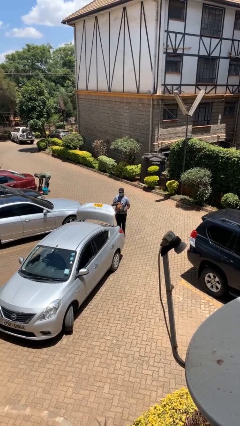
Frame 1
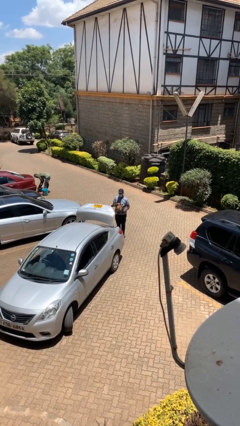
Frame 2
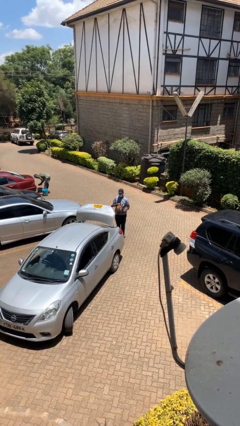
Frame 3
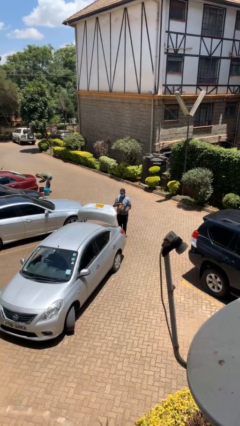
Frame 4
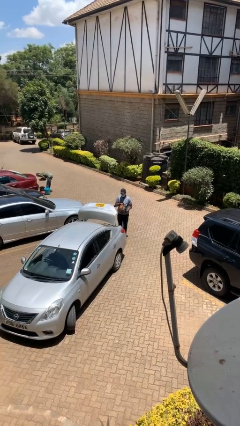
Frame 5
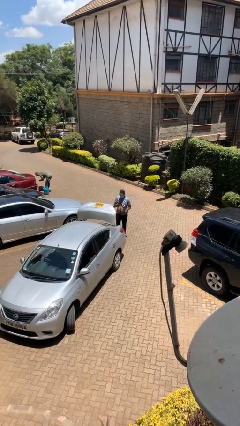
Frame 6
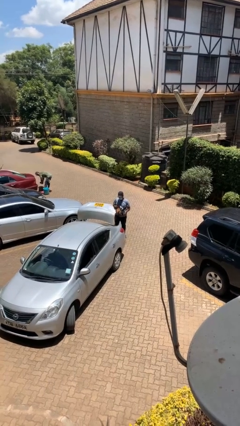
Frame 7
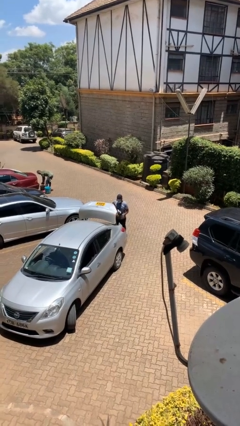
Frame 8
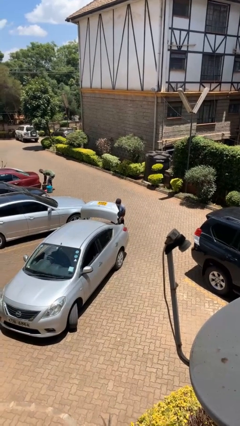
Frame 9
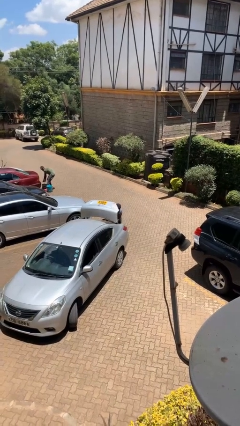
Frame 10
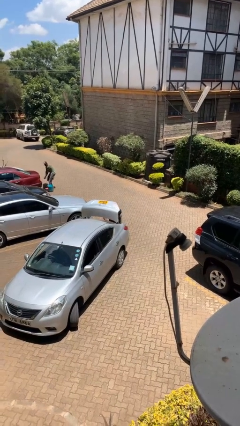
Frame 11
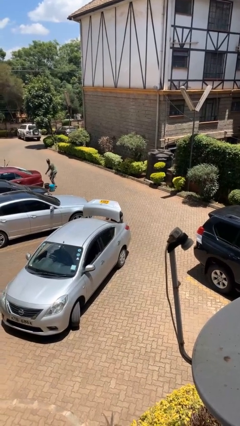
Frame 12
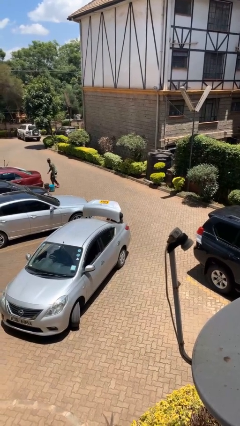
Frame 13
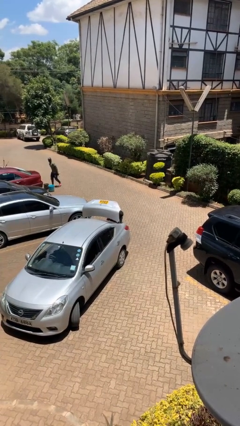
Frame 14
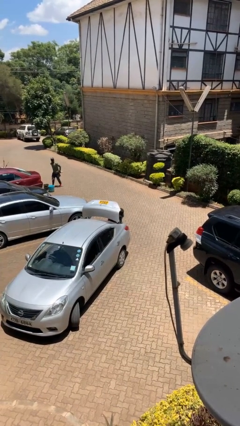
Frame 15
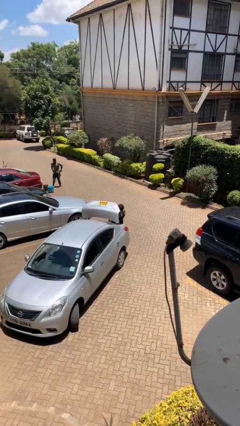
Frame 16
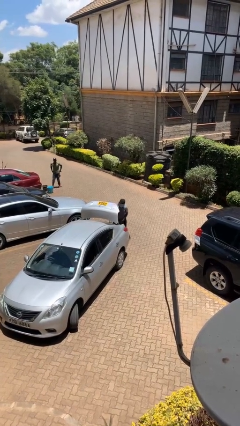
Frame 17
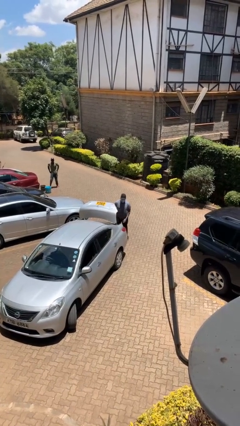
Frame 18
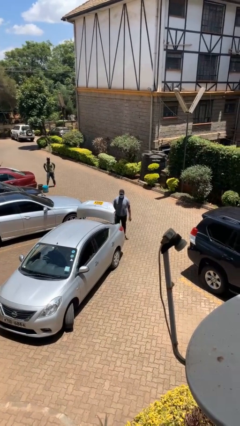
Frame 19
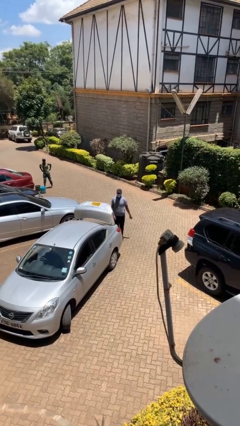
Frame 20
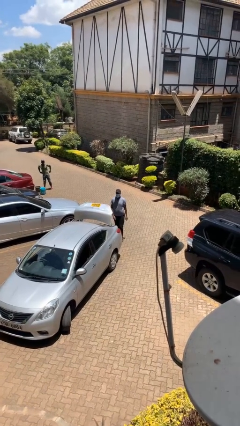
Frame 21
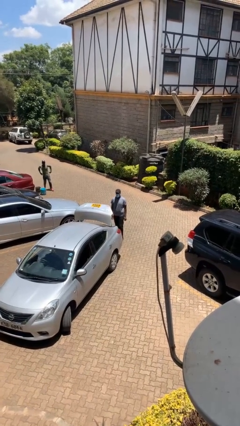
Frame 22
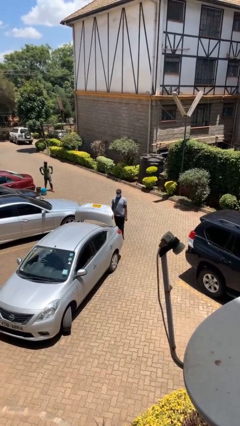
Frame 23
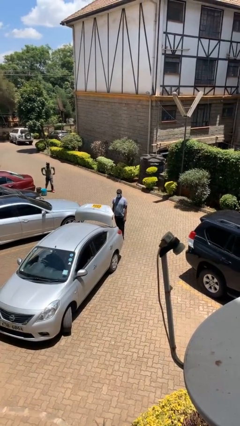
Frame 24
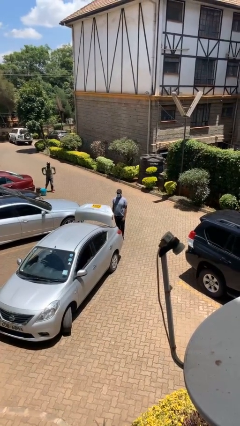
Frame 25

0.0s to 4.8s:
person loads car

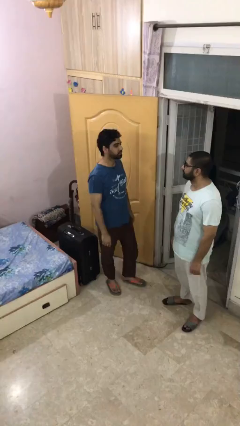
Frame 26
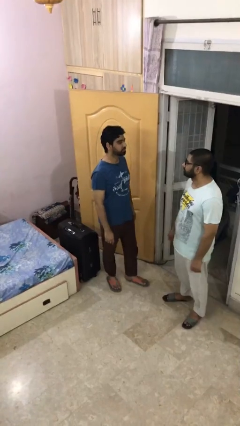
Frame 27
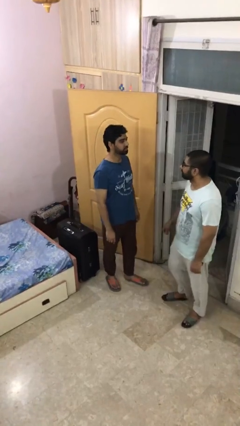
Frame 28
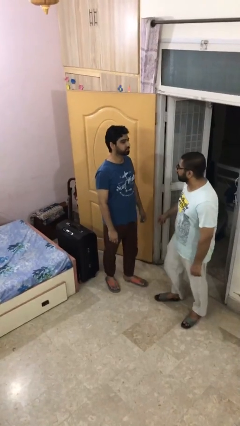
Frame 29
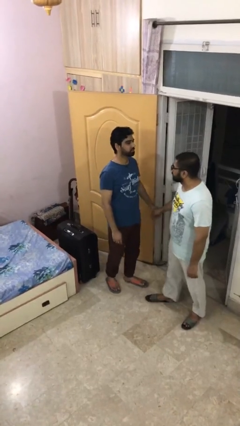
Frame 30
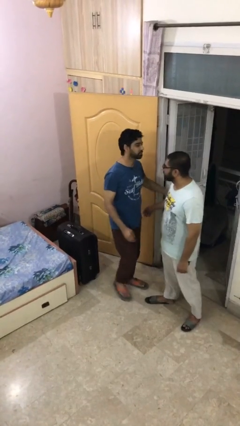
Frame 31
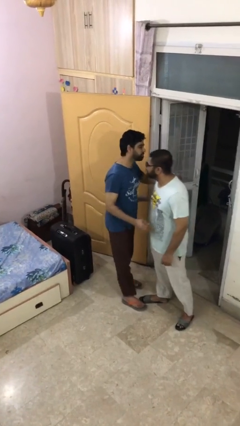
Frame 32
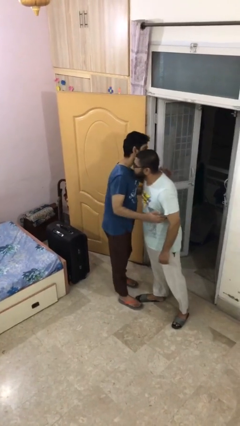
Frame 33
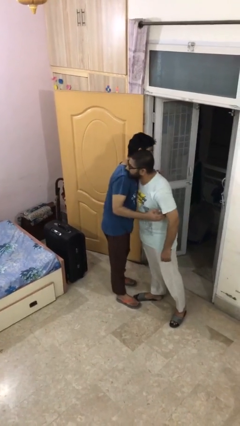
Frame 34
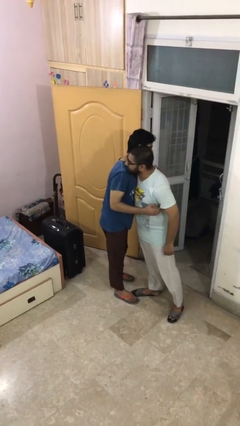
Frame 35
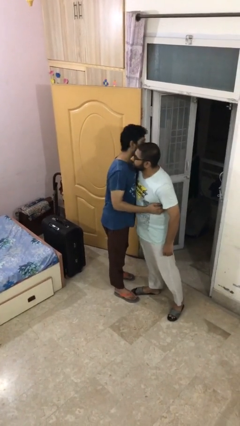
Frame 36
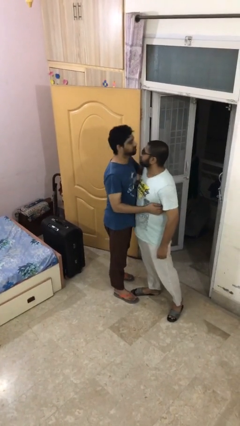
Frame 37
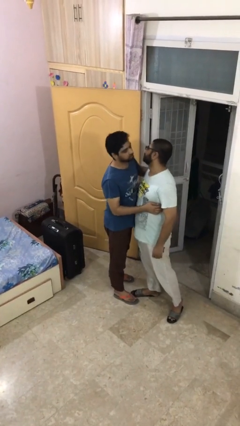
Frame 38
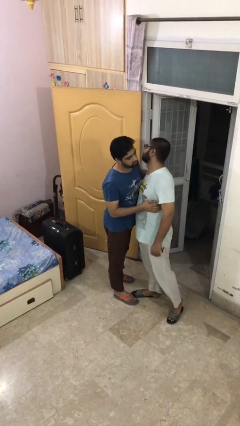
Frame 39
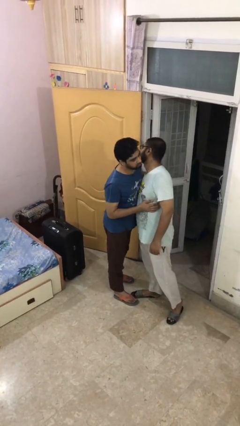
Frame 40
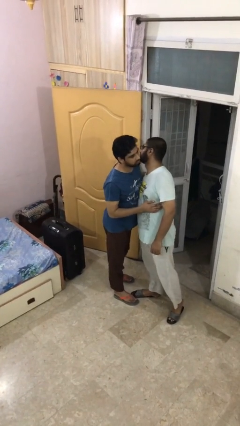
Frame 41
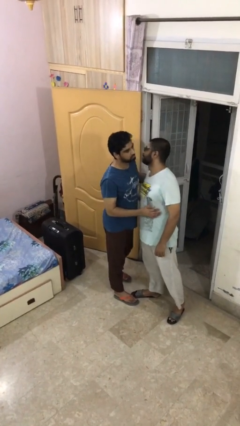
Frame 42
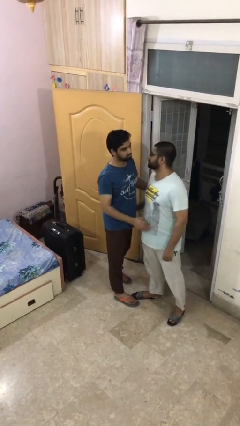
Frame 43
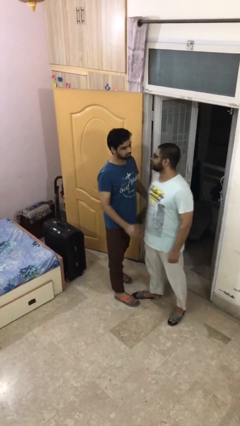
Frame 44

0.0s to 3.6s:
person embraces person

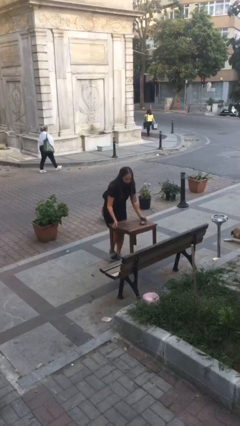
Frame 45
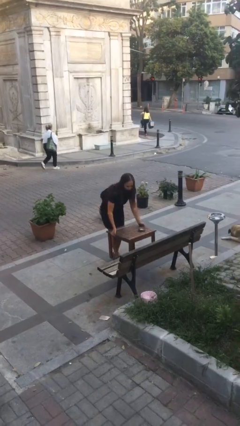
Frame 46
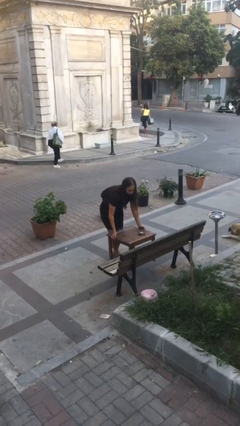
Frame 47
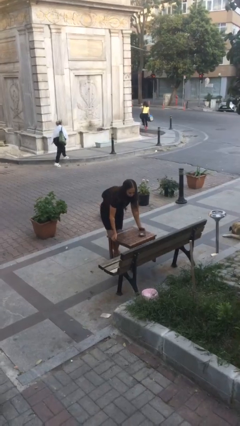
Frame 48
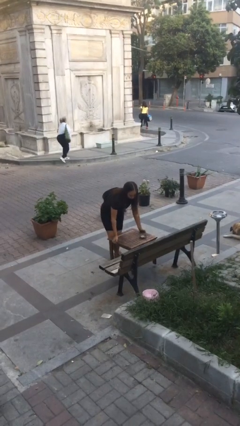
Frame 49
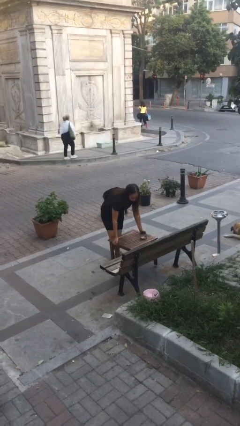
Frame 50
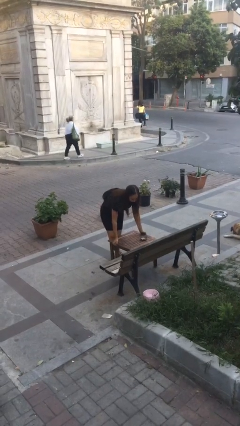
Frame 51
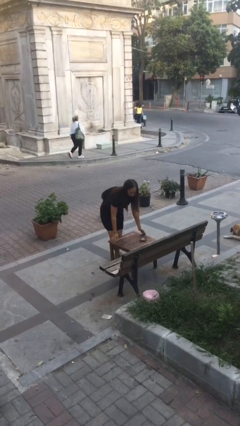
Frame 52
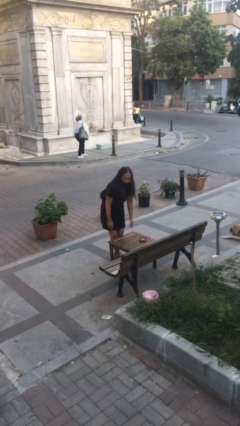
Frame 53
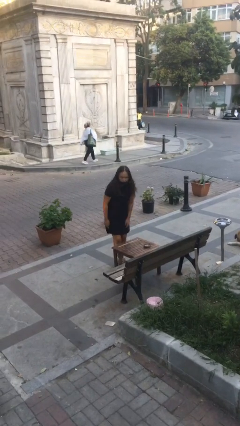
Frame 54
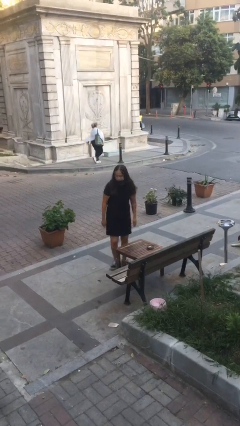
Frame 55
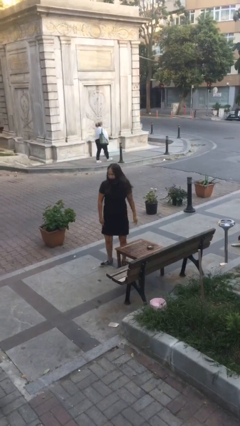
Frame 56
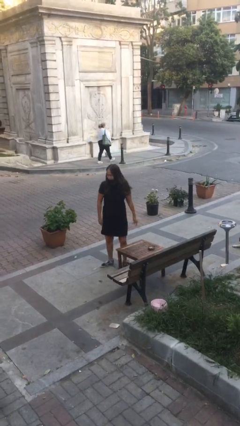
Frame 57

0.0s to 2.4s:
person puts down object on floor

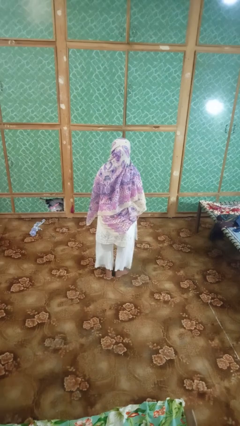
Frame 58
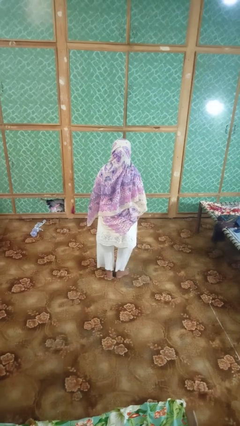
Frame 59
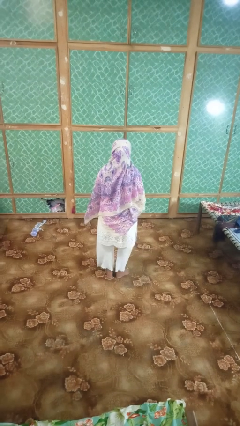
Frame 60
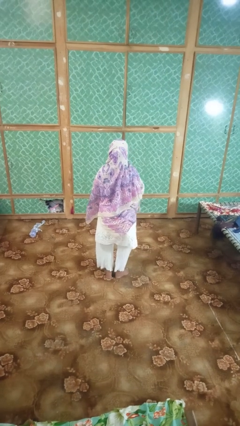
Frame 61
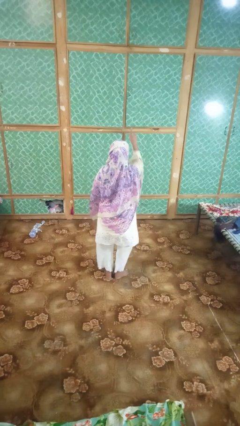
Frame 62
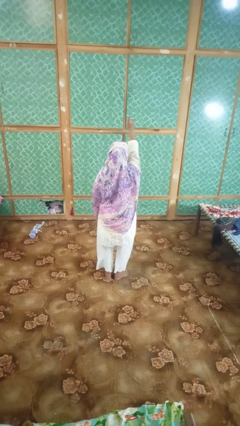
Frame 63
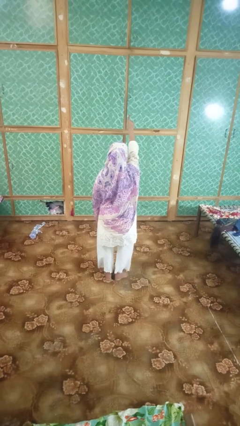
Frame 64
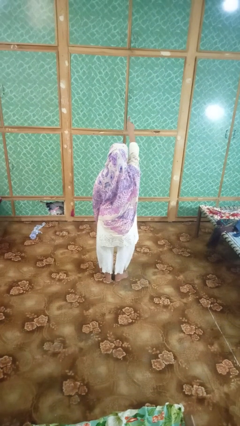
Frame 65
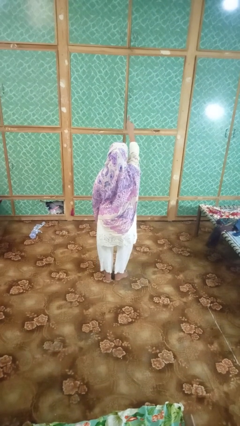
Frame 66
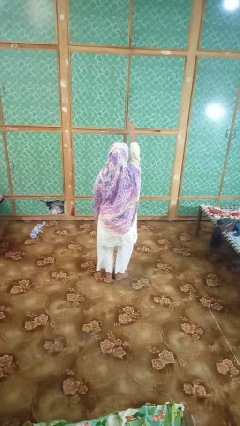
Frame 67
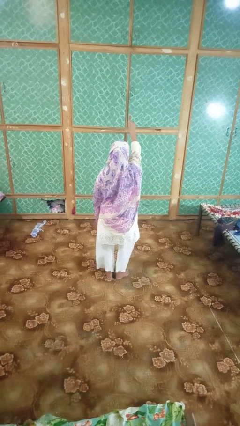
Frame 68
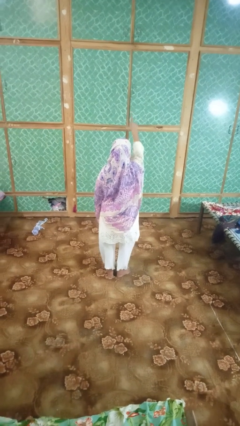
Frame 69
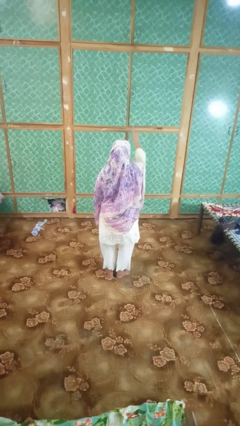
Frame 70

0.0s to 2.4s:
person gestures number one

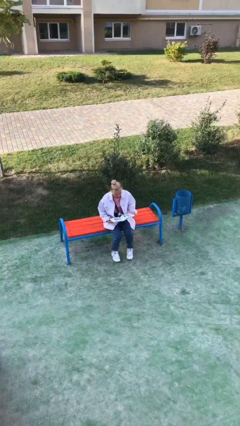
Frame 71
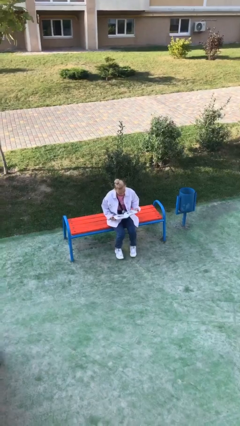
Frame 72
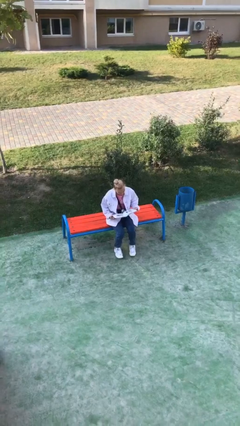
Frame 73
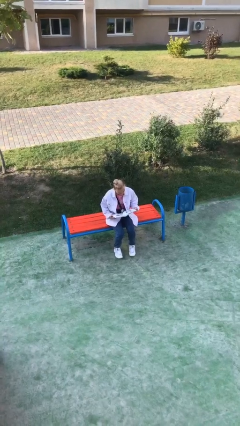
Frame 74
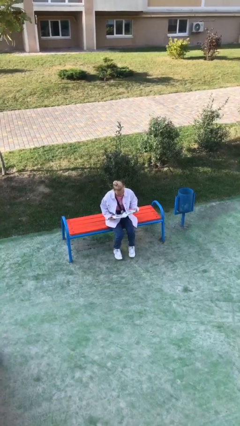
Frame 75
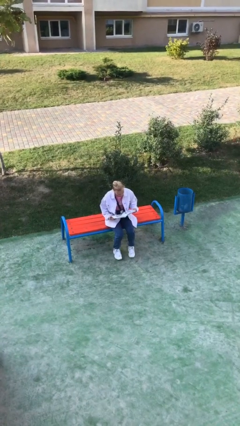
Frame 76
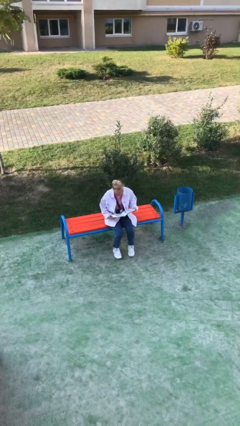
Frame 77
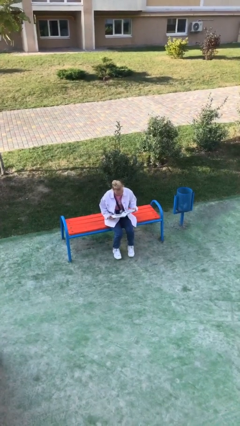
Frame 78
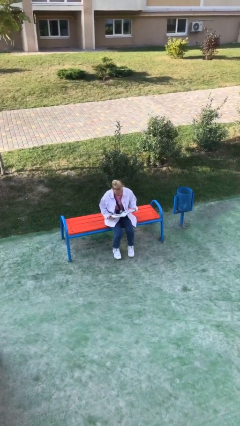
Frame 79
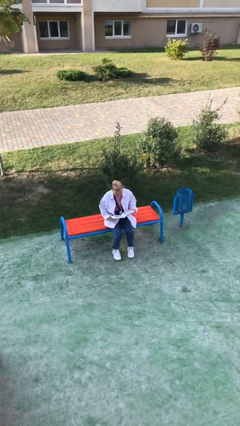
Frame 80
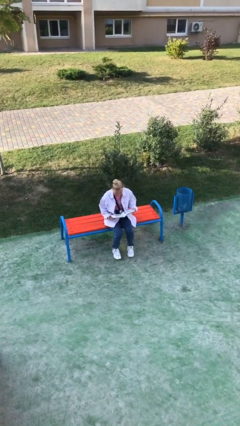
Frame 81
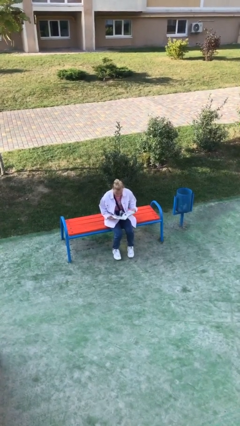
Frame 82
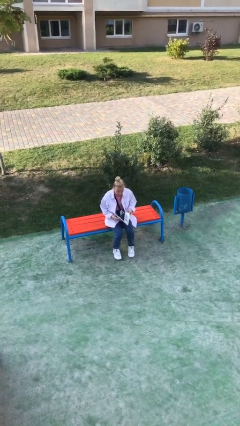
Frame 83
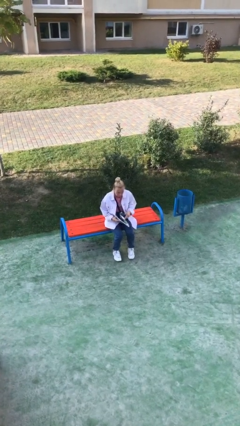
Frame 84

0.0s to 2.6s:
person reads document

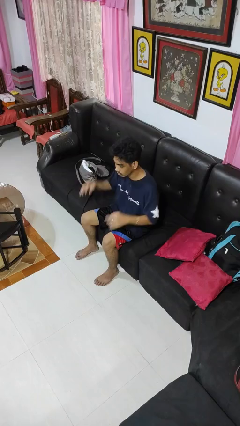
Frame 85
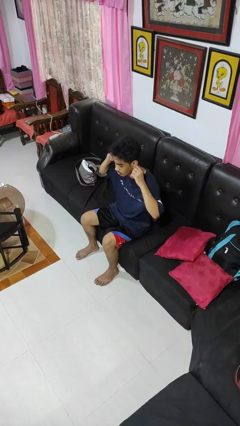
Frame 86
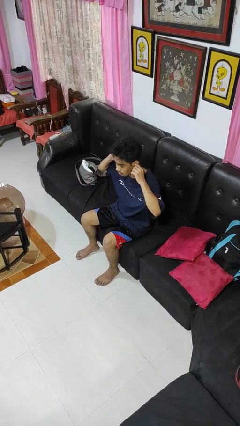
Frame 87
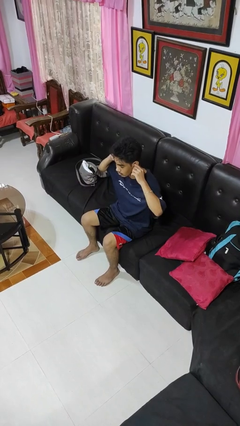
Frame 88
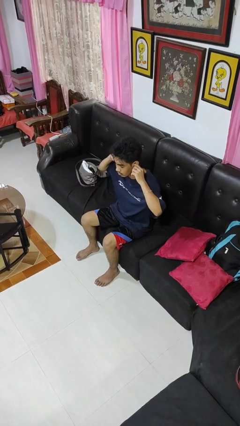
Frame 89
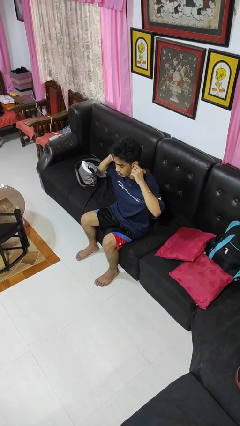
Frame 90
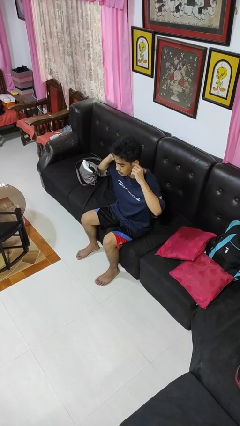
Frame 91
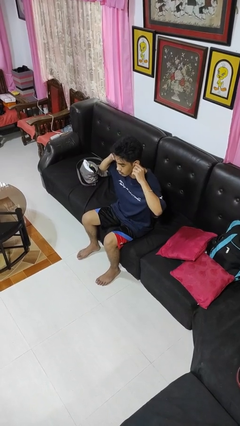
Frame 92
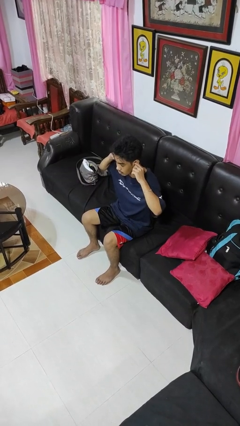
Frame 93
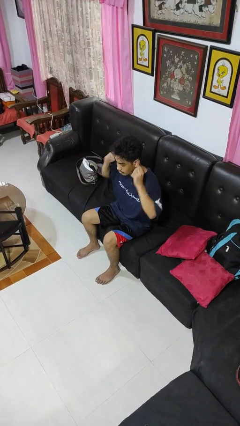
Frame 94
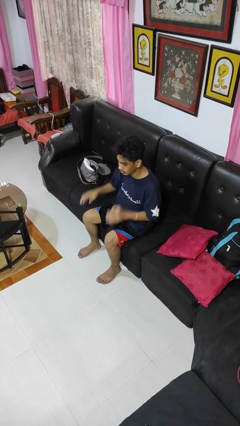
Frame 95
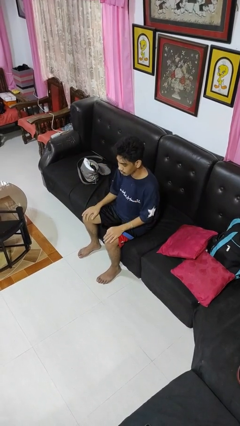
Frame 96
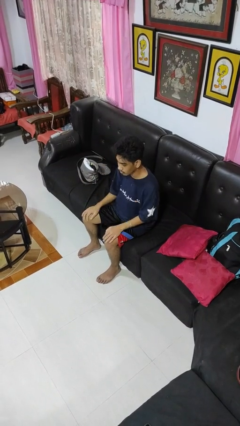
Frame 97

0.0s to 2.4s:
person puts fingers in ear
